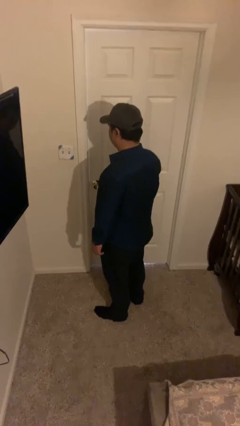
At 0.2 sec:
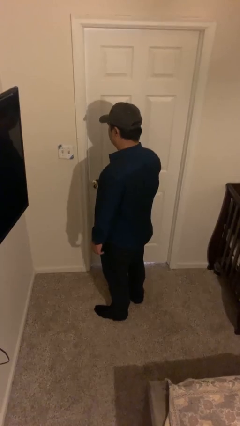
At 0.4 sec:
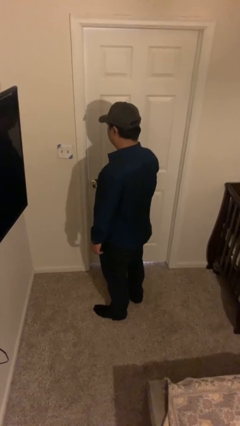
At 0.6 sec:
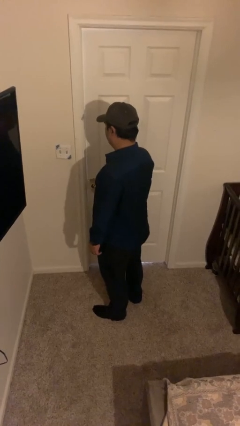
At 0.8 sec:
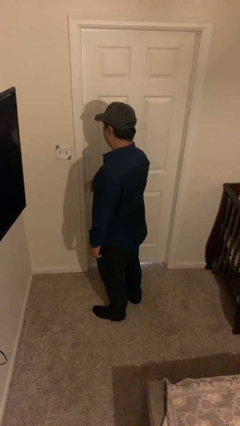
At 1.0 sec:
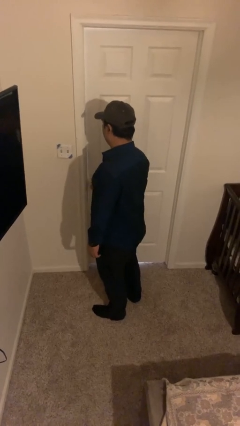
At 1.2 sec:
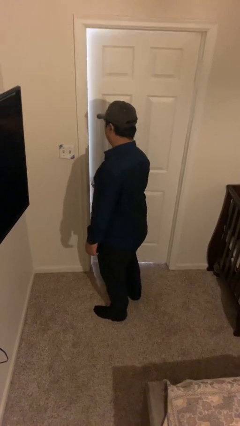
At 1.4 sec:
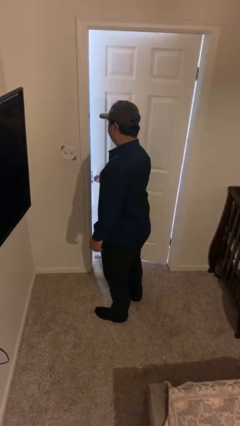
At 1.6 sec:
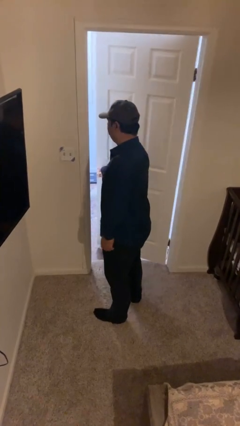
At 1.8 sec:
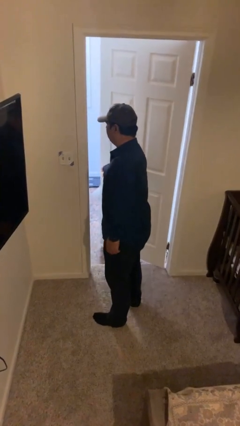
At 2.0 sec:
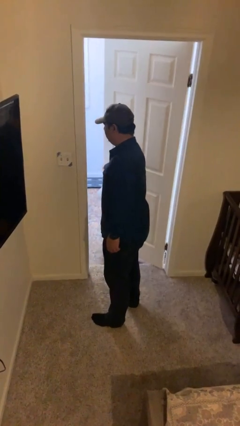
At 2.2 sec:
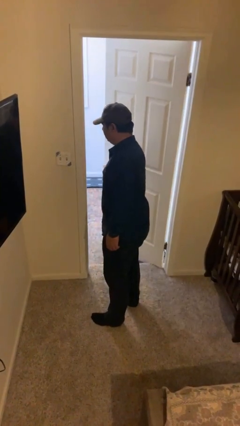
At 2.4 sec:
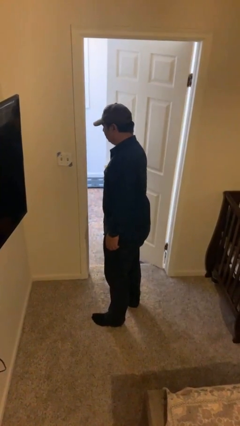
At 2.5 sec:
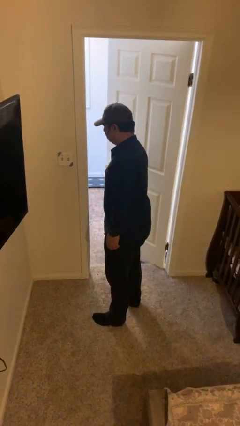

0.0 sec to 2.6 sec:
person opens facility door

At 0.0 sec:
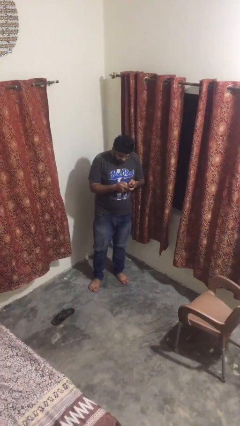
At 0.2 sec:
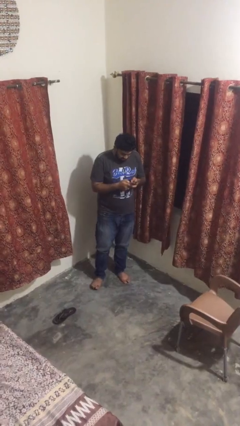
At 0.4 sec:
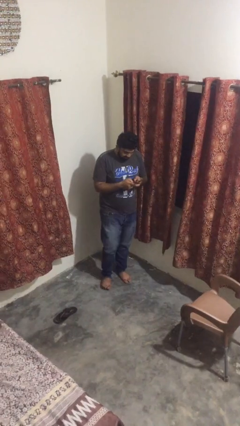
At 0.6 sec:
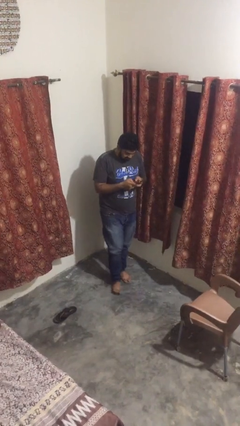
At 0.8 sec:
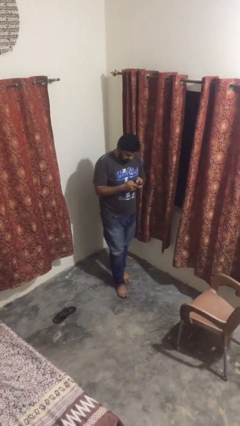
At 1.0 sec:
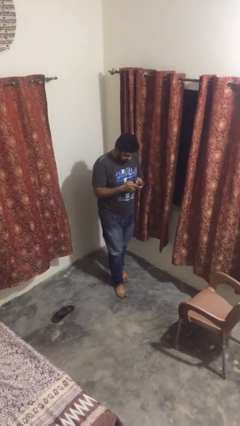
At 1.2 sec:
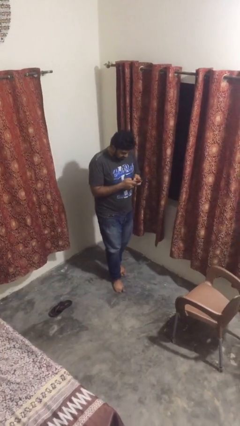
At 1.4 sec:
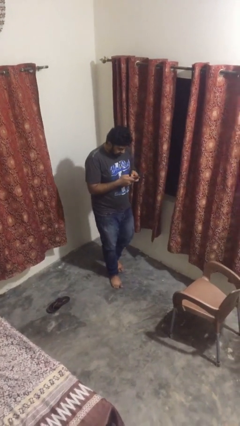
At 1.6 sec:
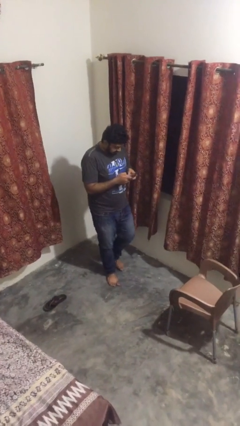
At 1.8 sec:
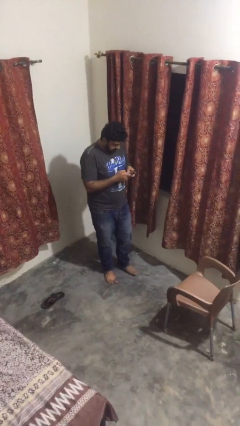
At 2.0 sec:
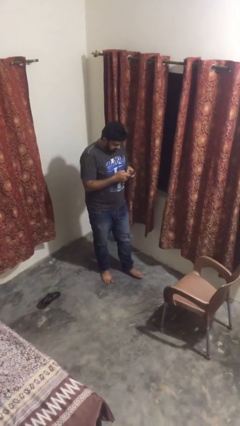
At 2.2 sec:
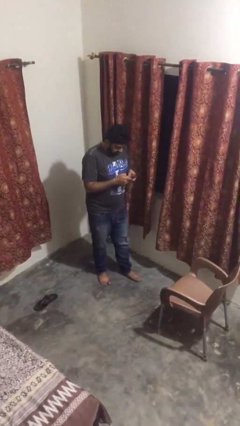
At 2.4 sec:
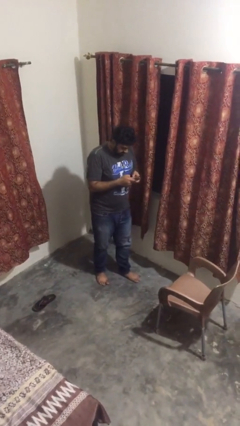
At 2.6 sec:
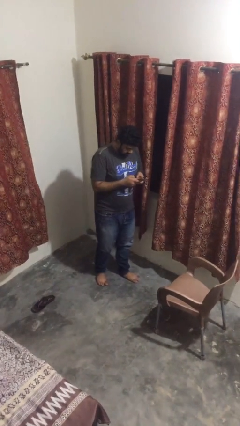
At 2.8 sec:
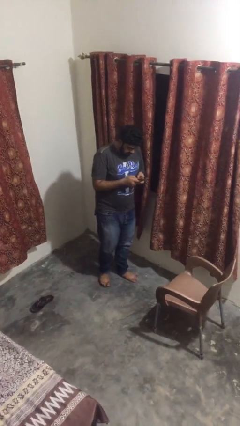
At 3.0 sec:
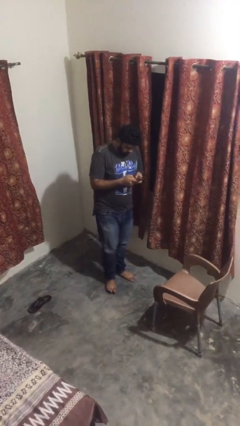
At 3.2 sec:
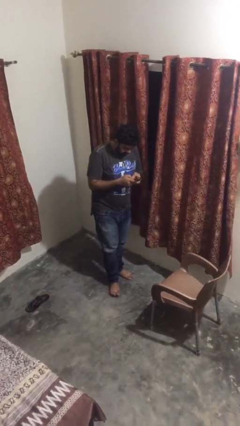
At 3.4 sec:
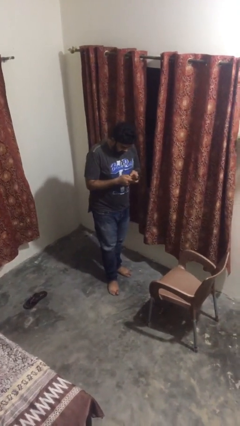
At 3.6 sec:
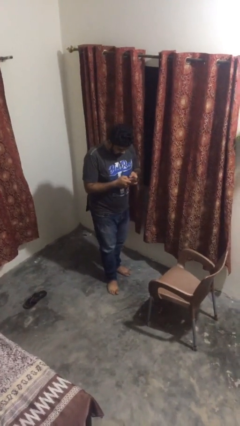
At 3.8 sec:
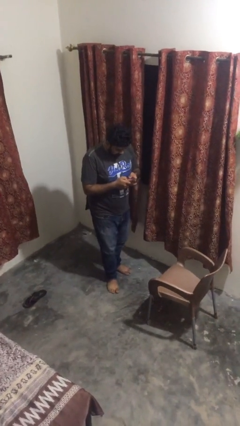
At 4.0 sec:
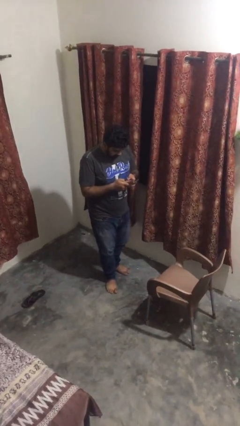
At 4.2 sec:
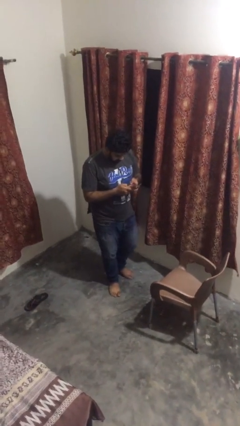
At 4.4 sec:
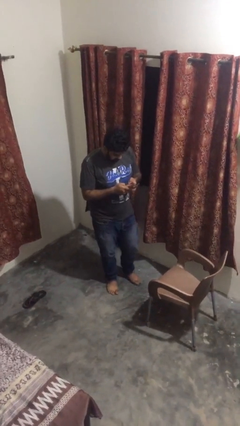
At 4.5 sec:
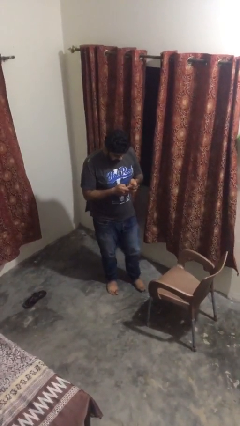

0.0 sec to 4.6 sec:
person texts on phone

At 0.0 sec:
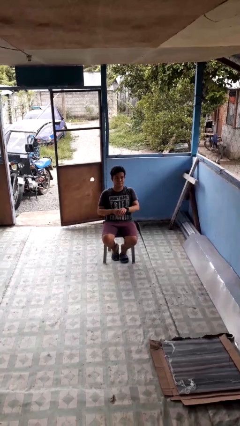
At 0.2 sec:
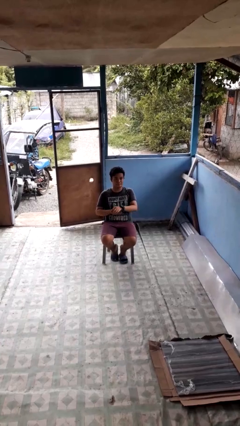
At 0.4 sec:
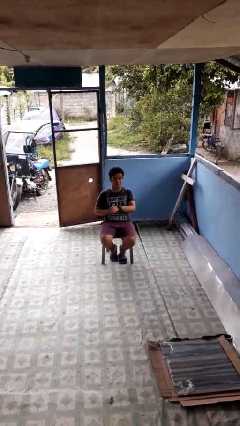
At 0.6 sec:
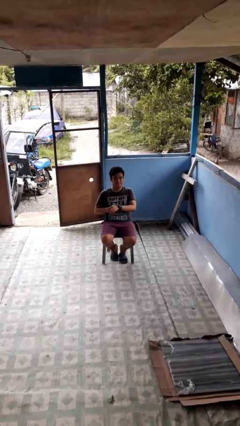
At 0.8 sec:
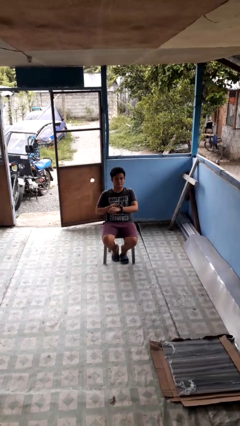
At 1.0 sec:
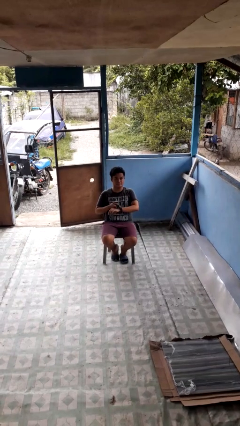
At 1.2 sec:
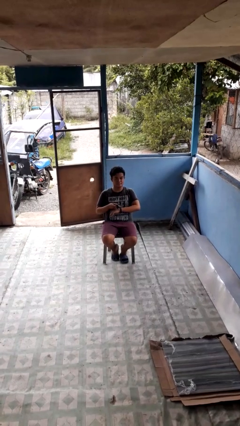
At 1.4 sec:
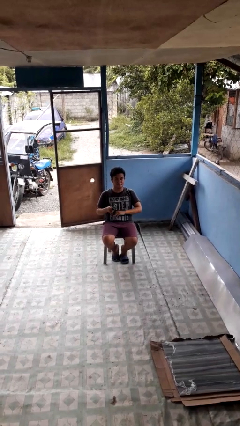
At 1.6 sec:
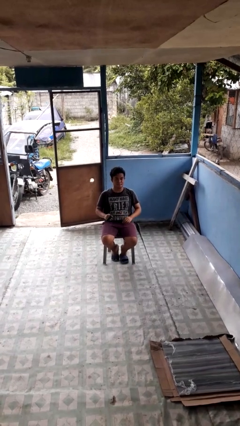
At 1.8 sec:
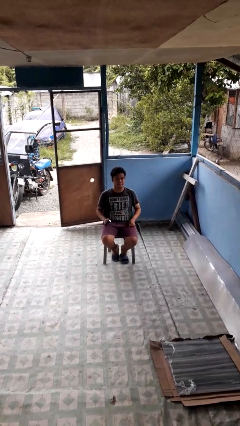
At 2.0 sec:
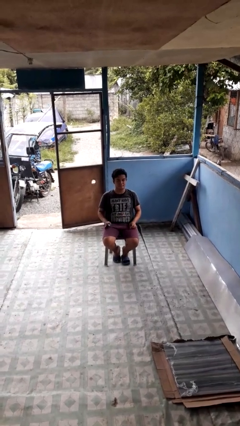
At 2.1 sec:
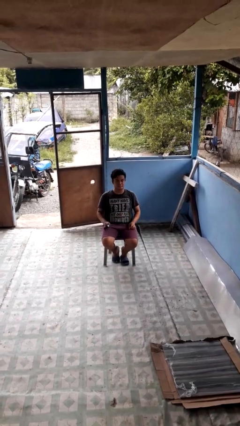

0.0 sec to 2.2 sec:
person takes off wristwatch

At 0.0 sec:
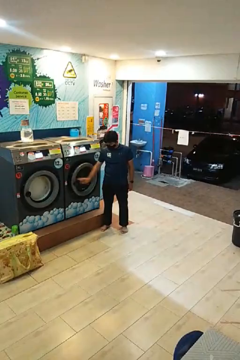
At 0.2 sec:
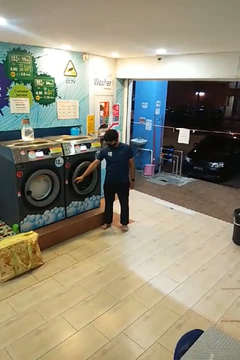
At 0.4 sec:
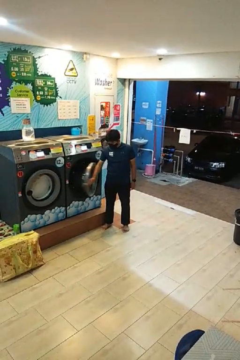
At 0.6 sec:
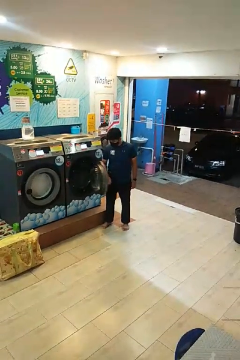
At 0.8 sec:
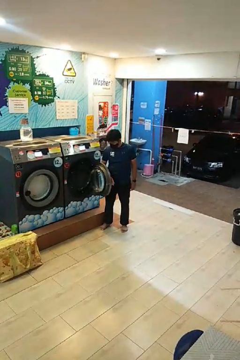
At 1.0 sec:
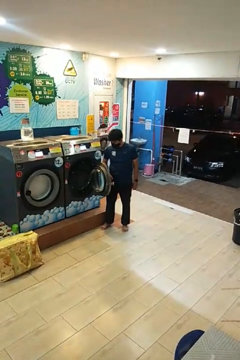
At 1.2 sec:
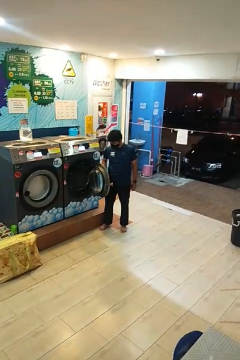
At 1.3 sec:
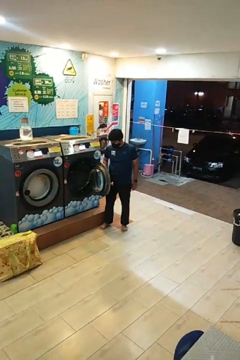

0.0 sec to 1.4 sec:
person opens clothes washer

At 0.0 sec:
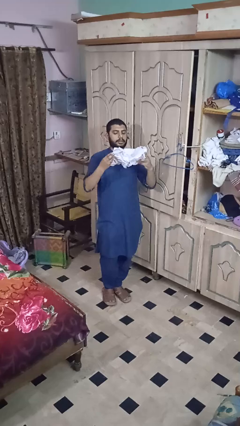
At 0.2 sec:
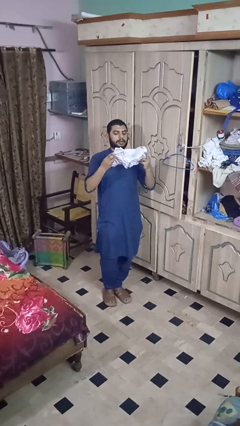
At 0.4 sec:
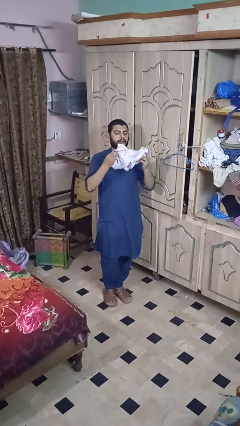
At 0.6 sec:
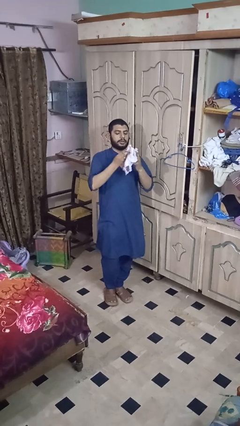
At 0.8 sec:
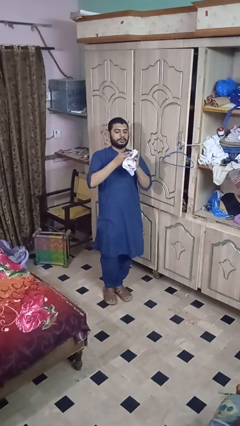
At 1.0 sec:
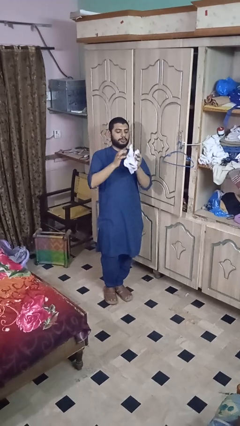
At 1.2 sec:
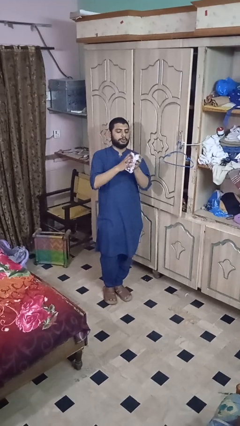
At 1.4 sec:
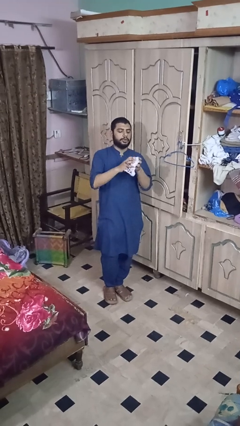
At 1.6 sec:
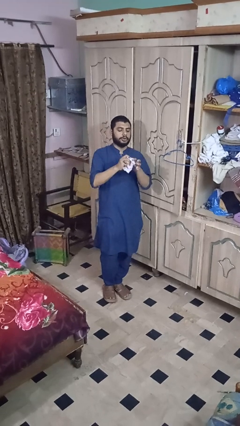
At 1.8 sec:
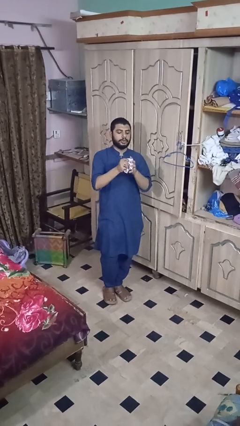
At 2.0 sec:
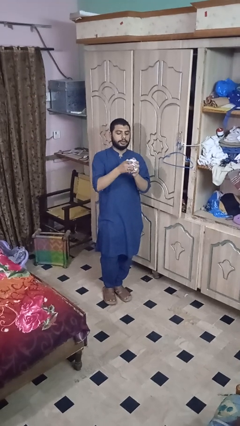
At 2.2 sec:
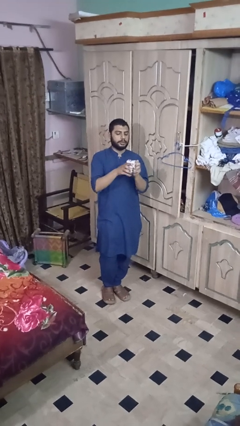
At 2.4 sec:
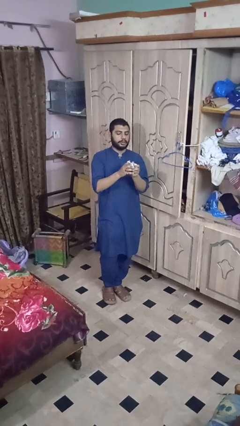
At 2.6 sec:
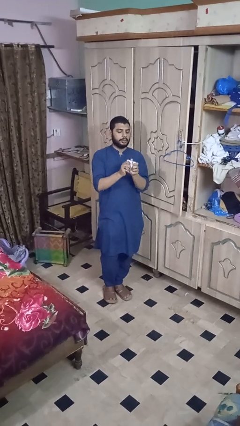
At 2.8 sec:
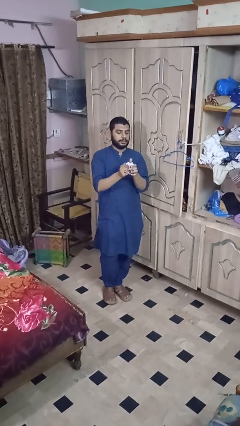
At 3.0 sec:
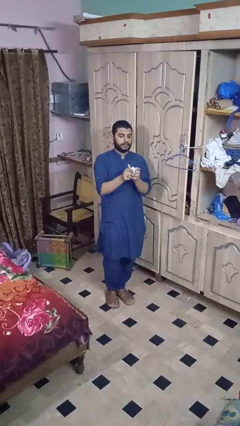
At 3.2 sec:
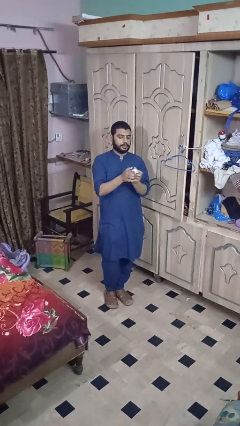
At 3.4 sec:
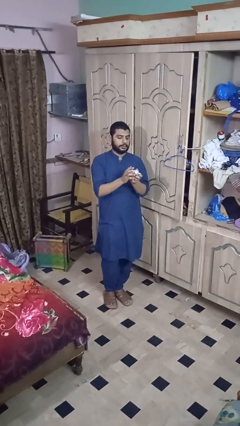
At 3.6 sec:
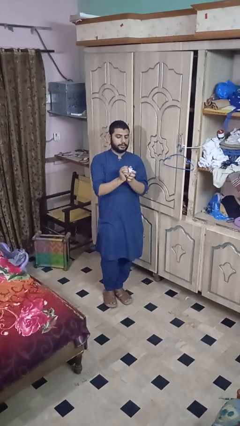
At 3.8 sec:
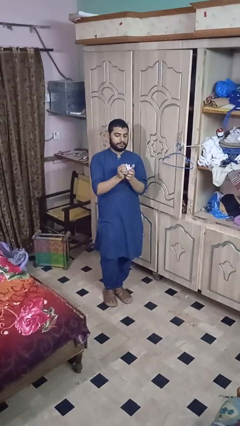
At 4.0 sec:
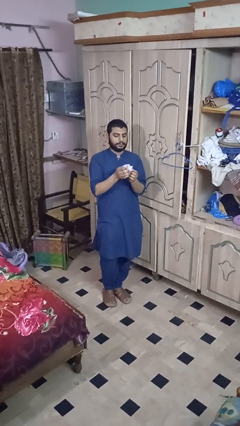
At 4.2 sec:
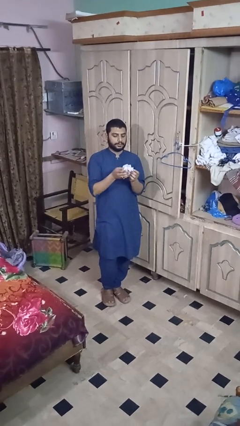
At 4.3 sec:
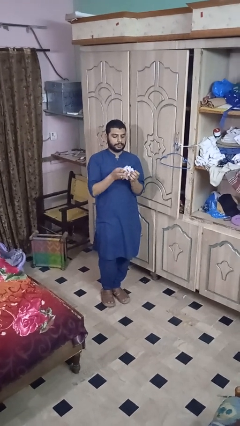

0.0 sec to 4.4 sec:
person crumples paper

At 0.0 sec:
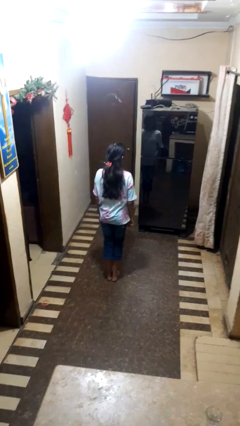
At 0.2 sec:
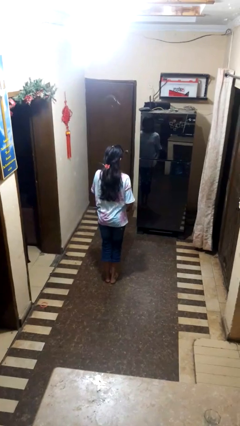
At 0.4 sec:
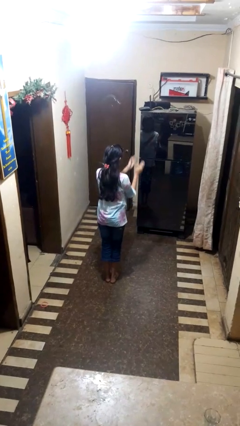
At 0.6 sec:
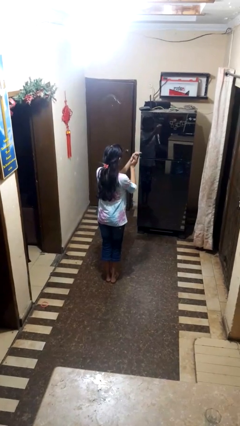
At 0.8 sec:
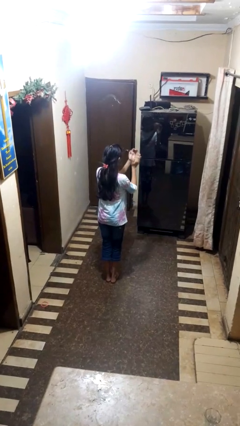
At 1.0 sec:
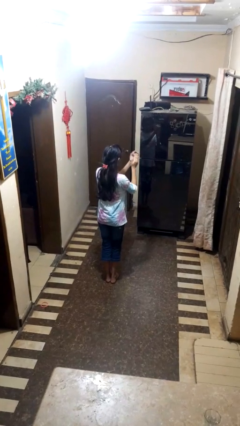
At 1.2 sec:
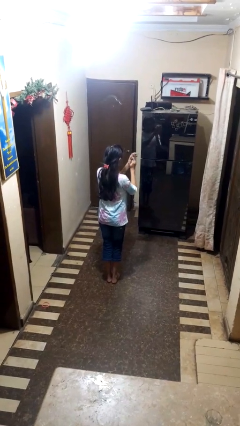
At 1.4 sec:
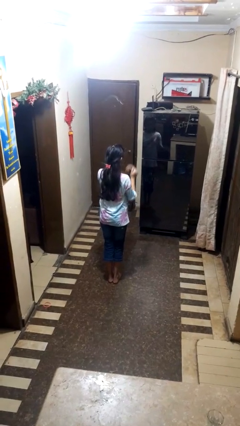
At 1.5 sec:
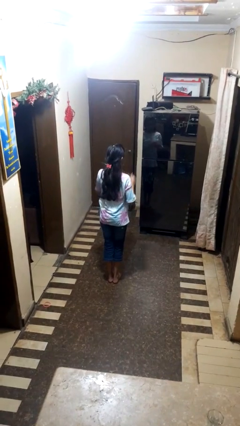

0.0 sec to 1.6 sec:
person claps hands

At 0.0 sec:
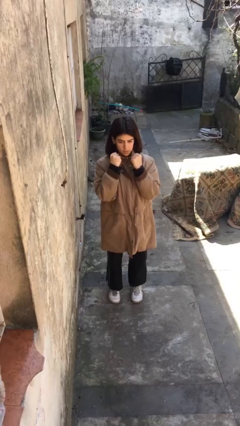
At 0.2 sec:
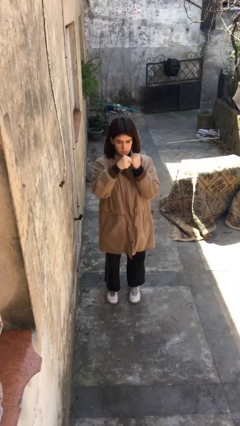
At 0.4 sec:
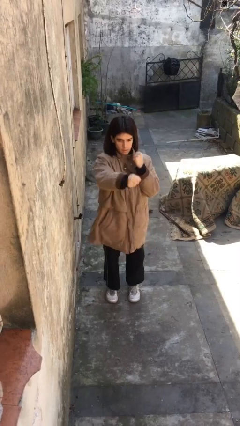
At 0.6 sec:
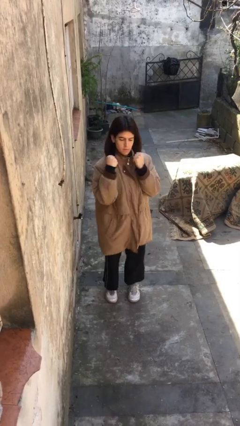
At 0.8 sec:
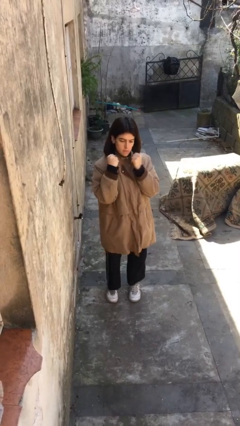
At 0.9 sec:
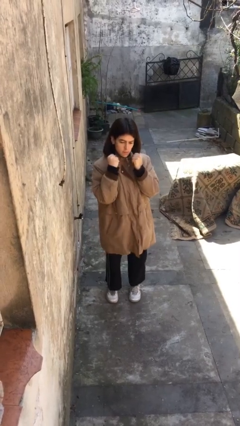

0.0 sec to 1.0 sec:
person punches
